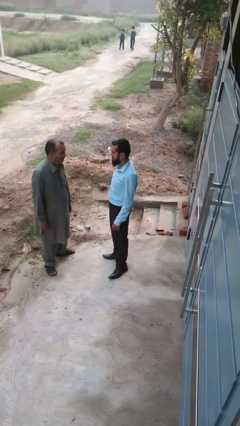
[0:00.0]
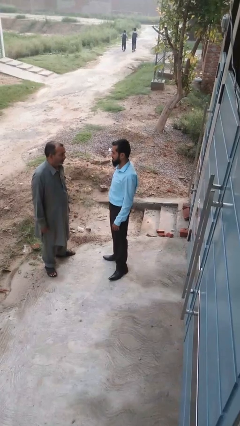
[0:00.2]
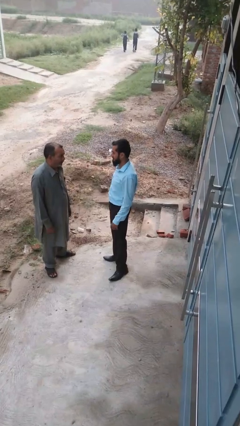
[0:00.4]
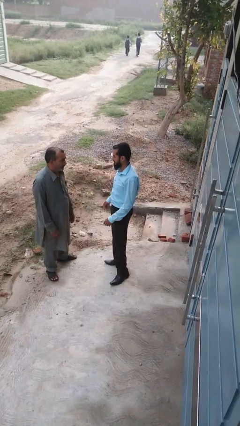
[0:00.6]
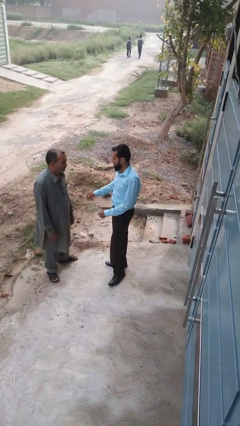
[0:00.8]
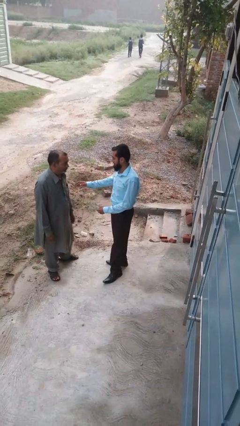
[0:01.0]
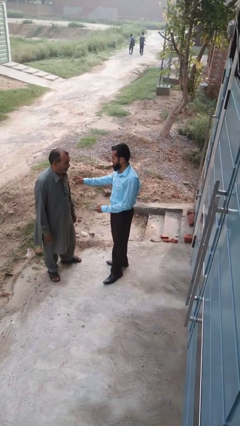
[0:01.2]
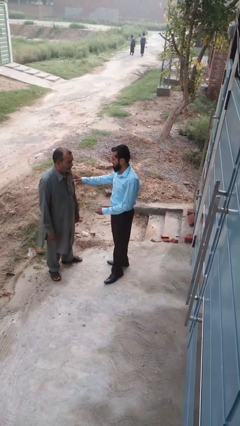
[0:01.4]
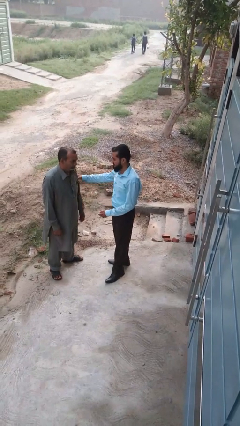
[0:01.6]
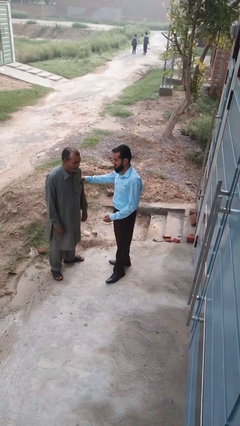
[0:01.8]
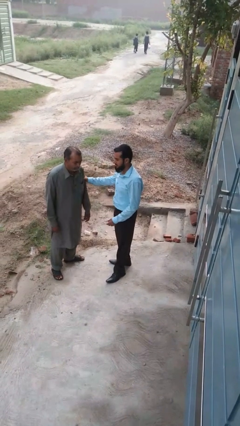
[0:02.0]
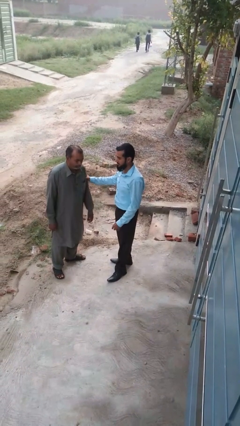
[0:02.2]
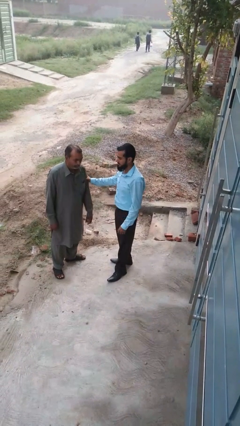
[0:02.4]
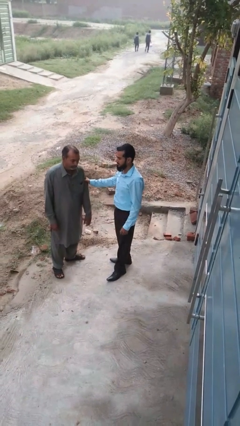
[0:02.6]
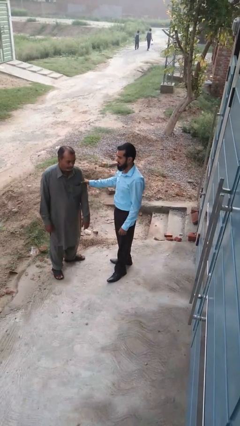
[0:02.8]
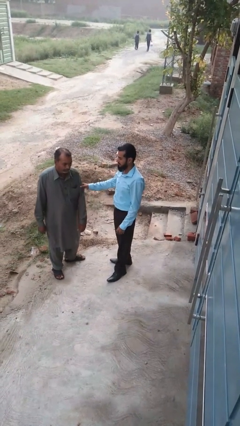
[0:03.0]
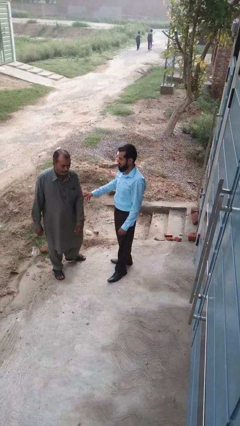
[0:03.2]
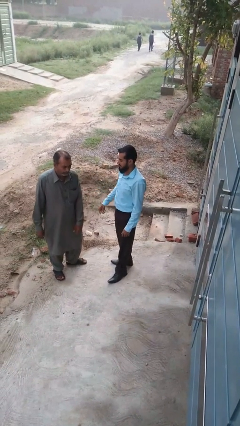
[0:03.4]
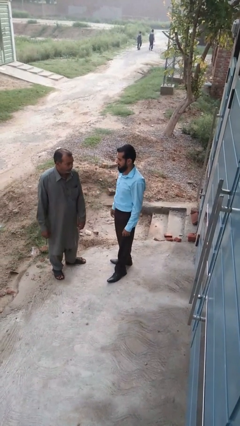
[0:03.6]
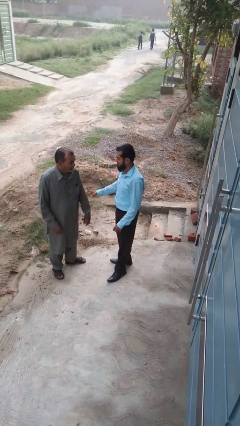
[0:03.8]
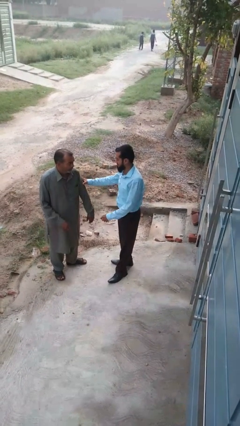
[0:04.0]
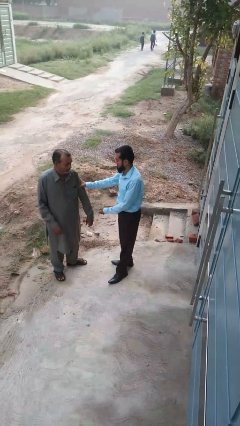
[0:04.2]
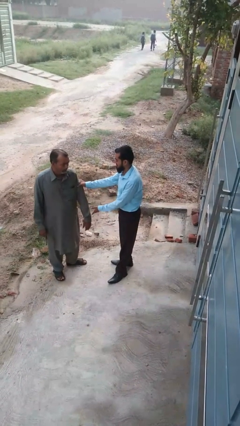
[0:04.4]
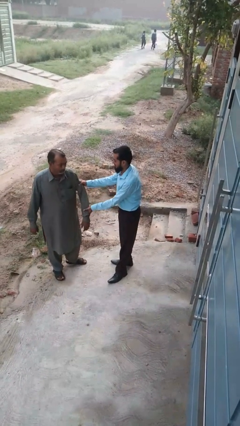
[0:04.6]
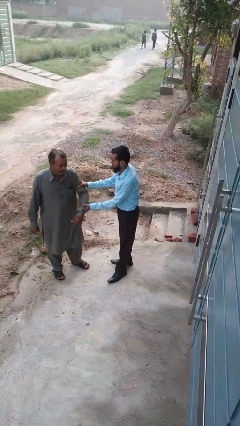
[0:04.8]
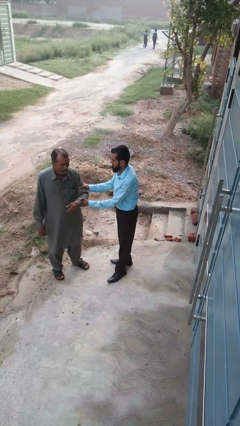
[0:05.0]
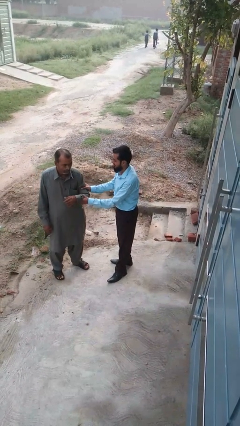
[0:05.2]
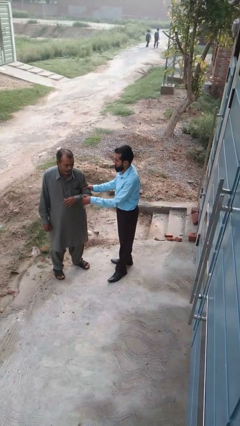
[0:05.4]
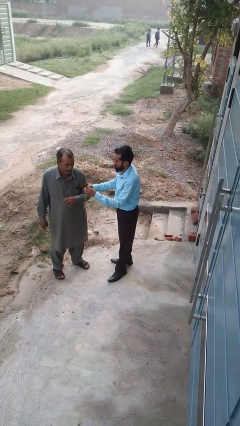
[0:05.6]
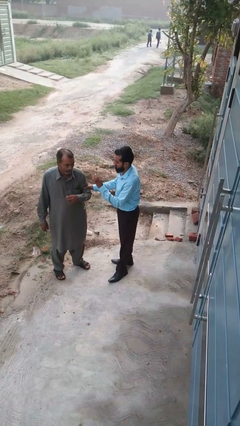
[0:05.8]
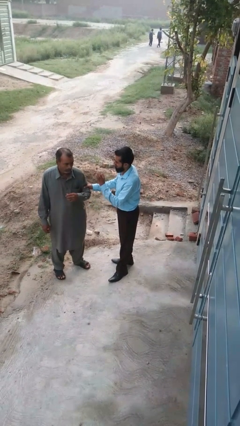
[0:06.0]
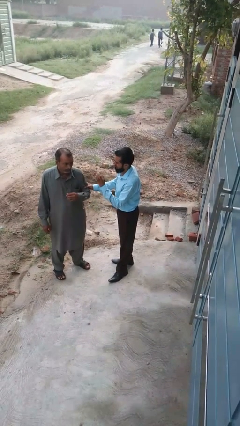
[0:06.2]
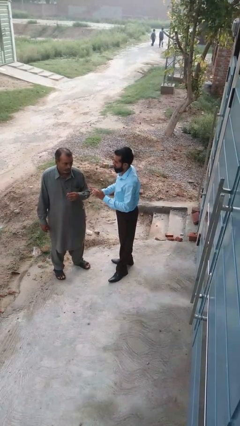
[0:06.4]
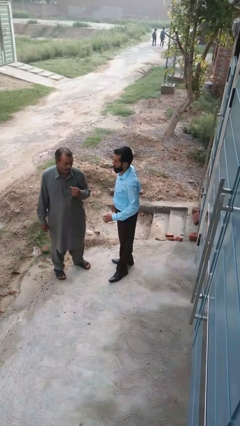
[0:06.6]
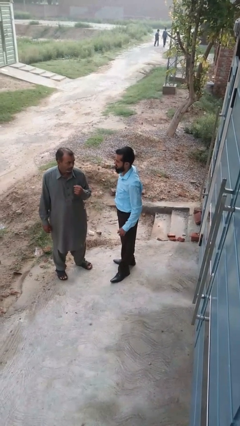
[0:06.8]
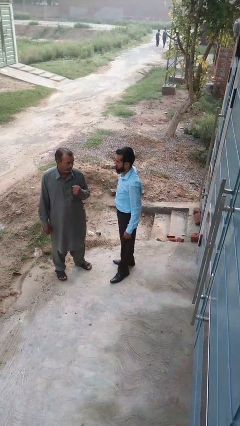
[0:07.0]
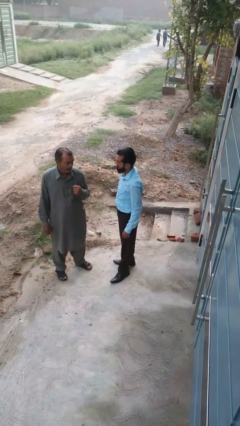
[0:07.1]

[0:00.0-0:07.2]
person grabs person by bicep

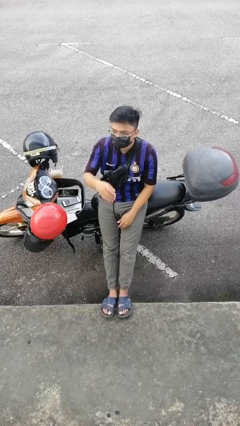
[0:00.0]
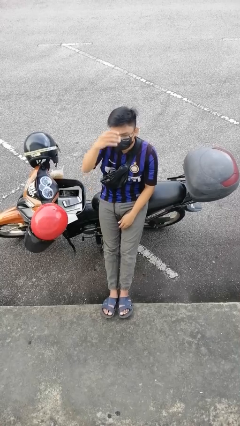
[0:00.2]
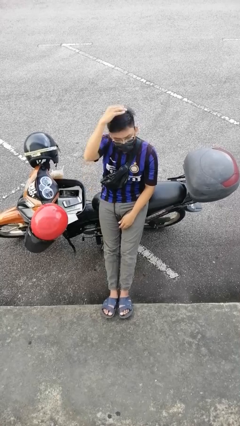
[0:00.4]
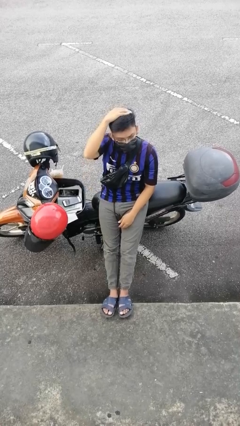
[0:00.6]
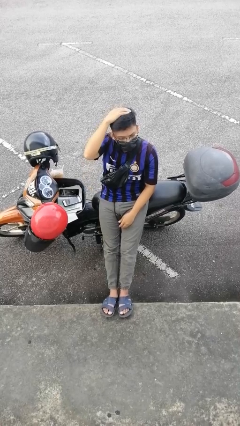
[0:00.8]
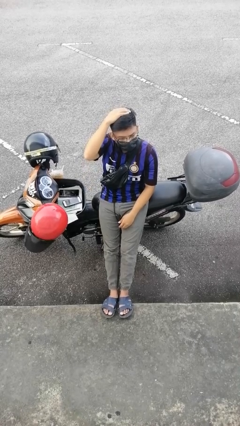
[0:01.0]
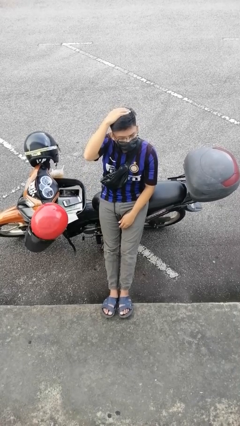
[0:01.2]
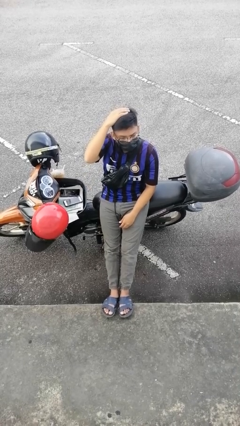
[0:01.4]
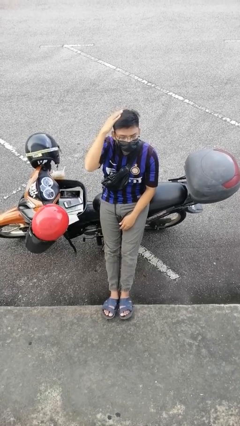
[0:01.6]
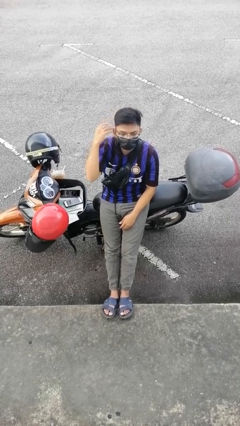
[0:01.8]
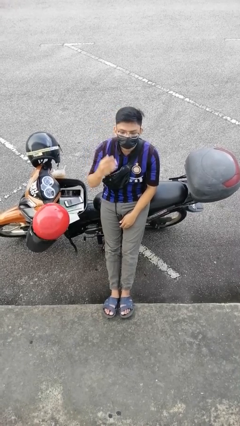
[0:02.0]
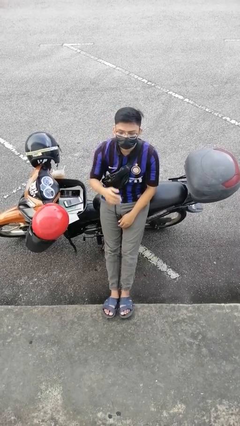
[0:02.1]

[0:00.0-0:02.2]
person pats head

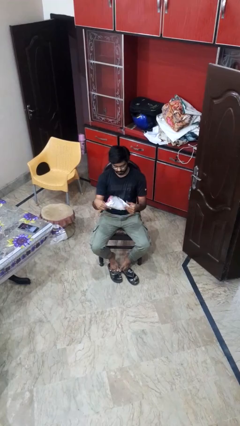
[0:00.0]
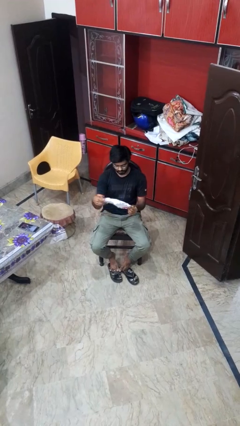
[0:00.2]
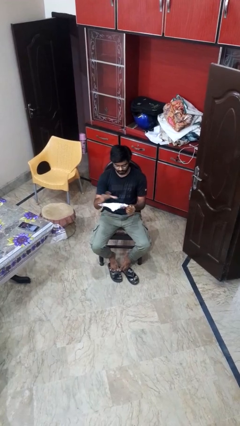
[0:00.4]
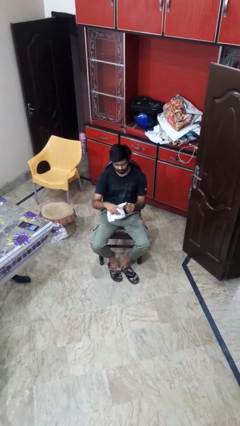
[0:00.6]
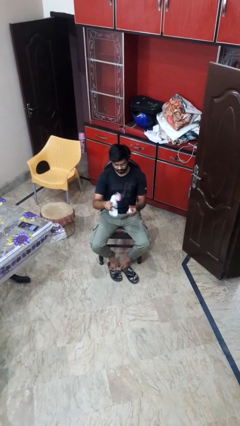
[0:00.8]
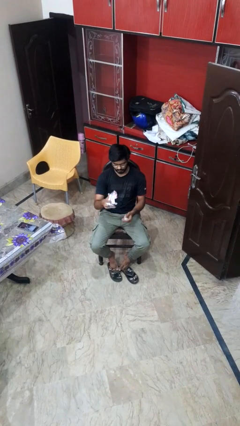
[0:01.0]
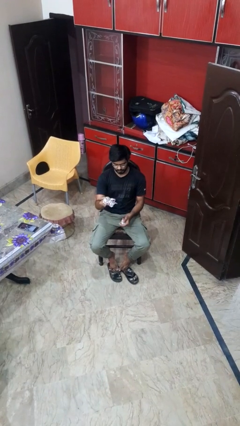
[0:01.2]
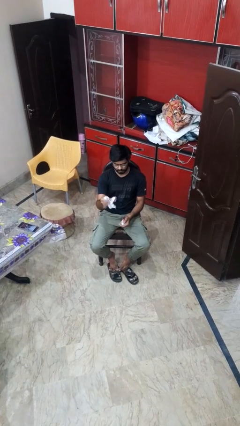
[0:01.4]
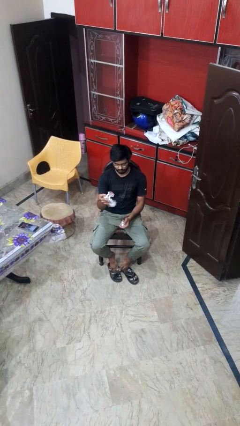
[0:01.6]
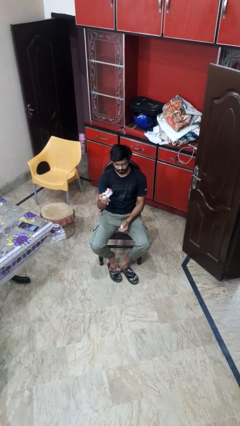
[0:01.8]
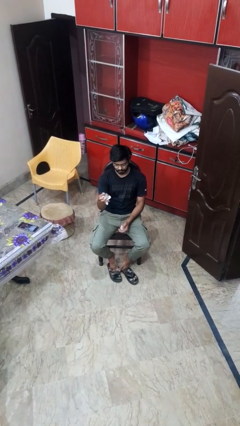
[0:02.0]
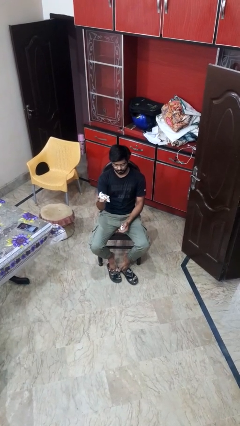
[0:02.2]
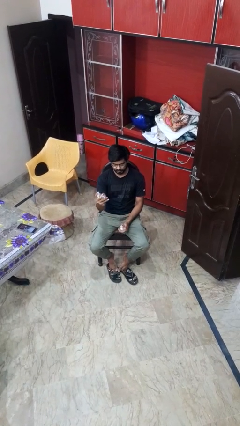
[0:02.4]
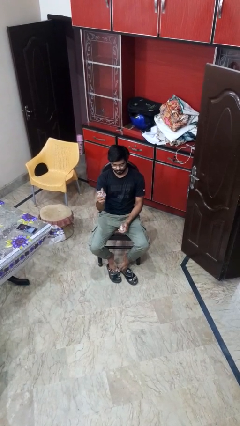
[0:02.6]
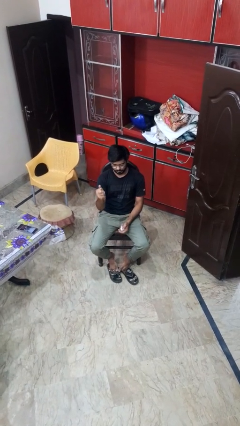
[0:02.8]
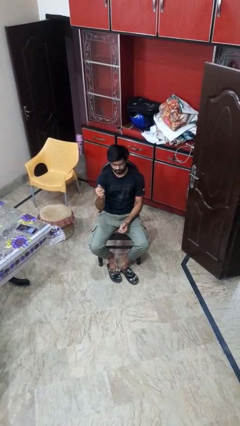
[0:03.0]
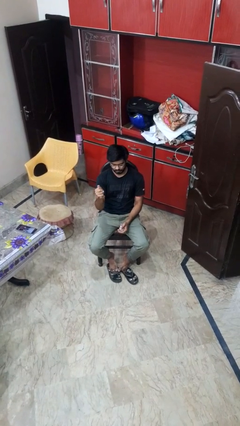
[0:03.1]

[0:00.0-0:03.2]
person crumples paper

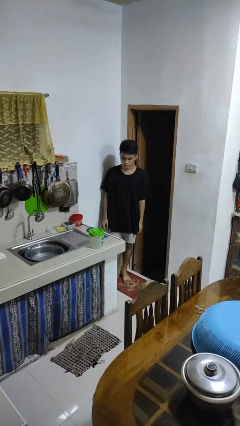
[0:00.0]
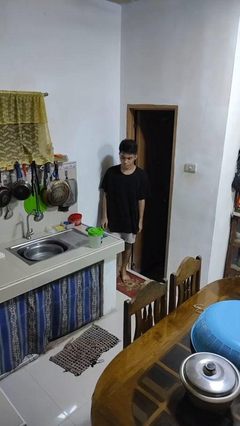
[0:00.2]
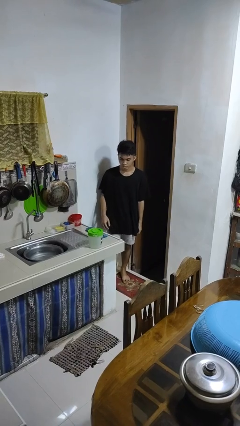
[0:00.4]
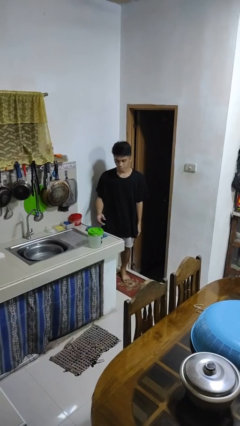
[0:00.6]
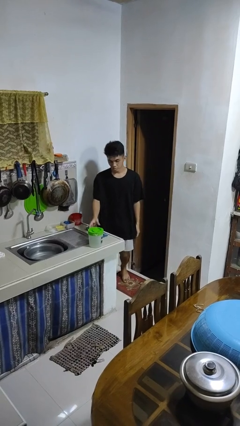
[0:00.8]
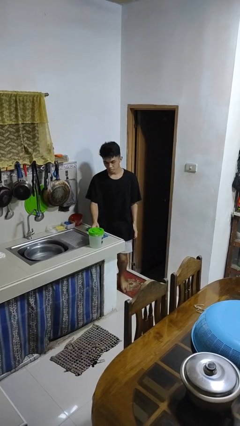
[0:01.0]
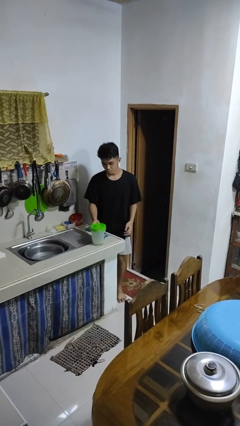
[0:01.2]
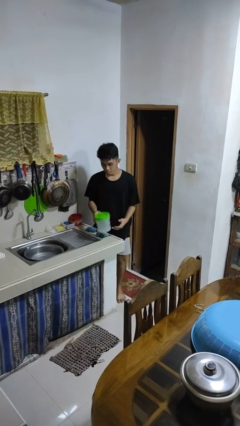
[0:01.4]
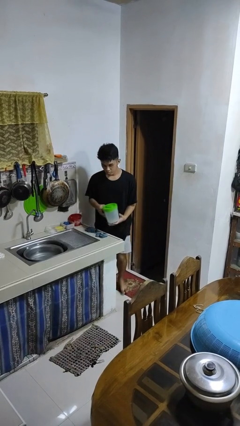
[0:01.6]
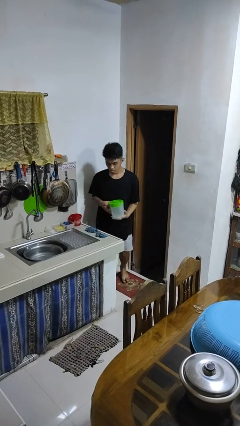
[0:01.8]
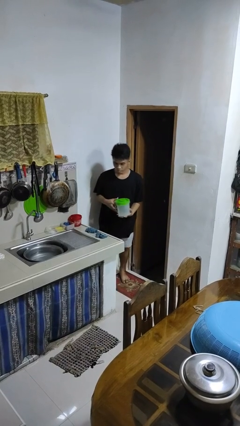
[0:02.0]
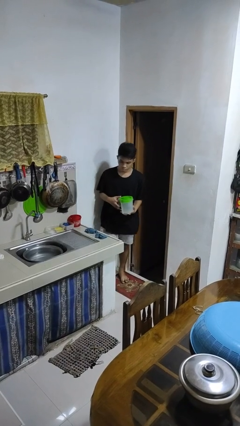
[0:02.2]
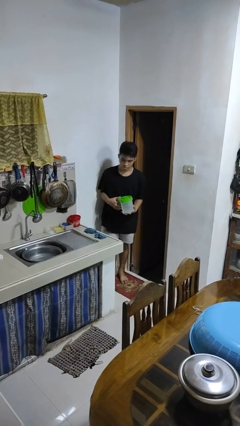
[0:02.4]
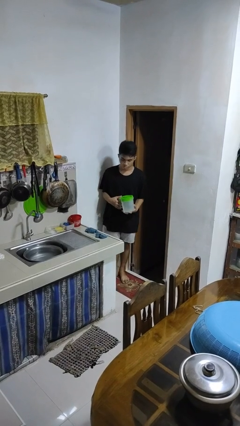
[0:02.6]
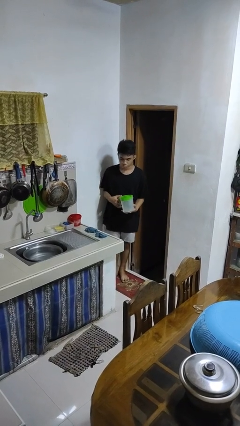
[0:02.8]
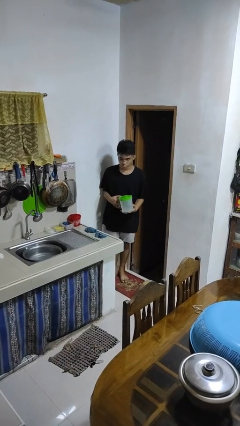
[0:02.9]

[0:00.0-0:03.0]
person picks up object from countertop

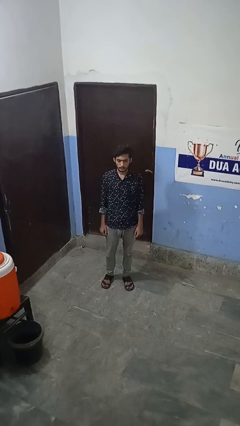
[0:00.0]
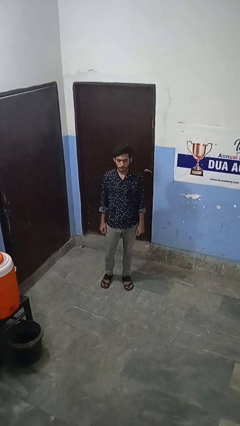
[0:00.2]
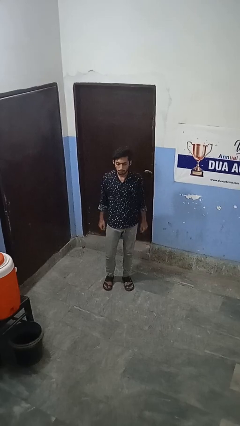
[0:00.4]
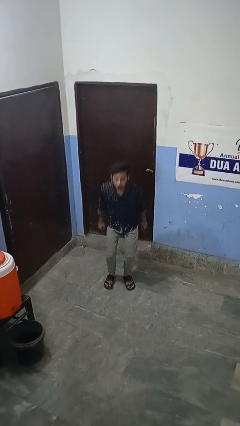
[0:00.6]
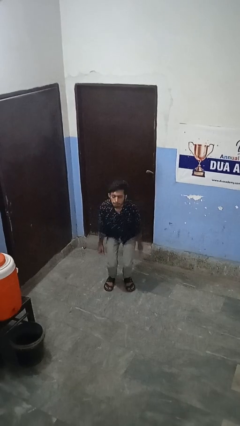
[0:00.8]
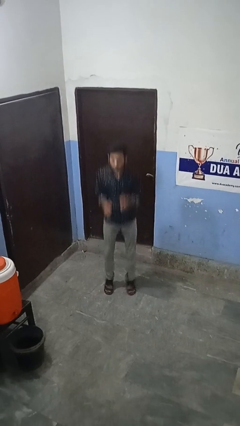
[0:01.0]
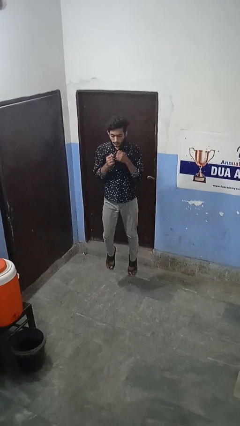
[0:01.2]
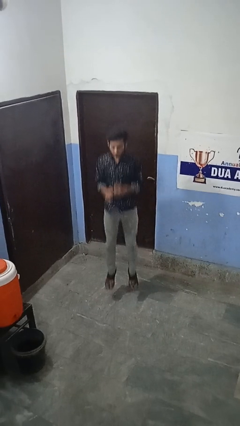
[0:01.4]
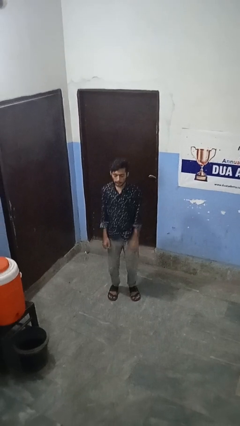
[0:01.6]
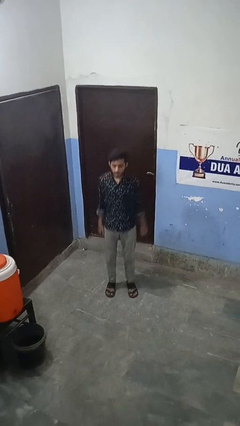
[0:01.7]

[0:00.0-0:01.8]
person jumps
